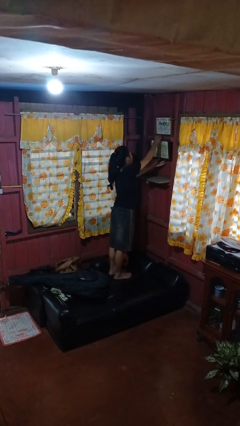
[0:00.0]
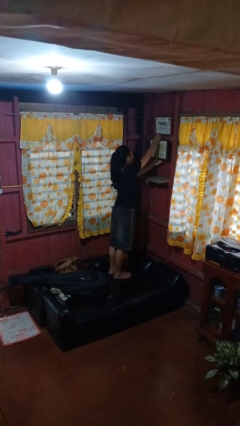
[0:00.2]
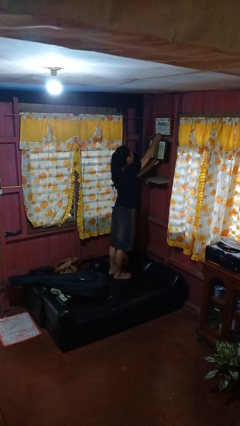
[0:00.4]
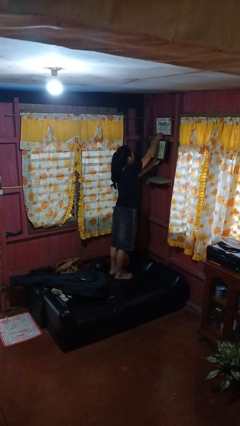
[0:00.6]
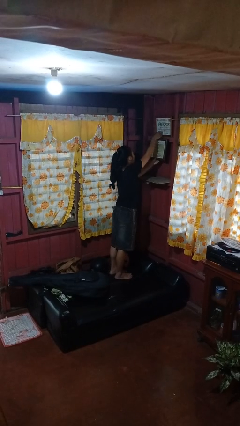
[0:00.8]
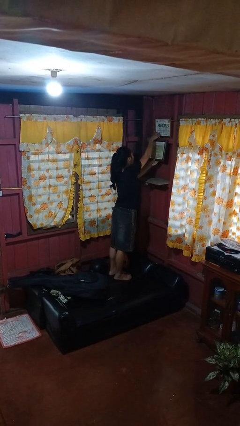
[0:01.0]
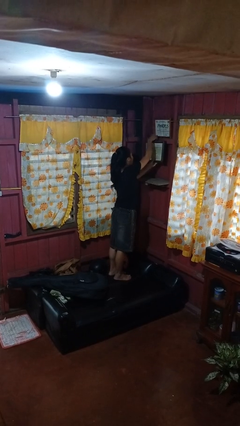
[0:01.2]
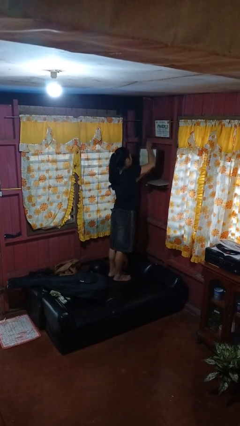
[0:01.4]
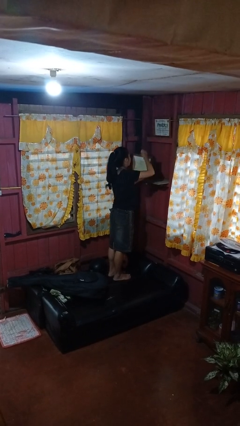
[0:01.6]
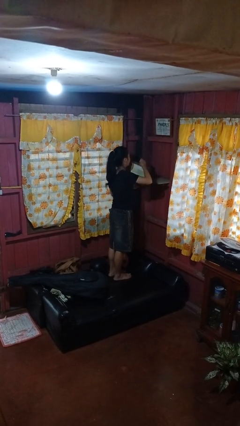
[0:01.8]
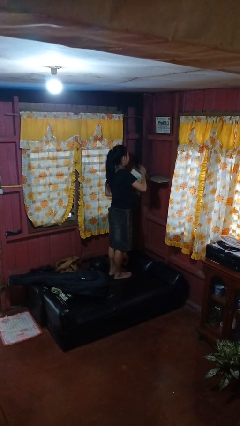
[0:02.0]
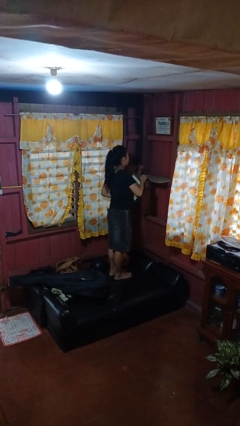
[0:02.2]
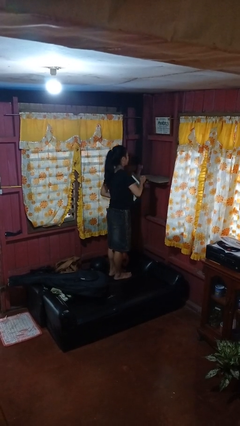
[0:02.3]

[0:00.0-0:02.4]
person takes down picture frame

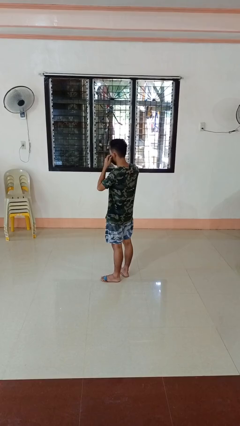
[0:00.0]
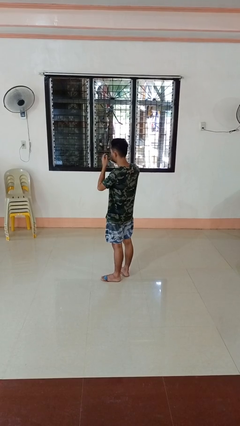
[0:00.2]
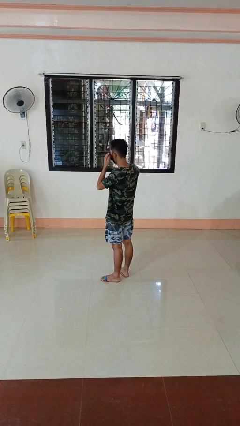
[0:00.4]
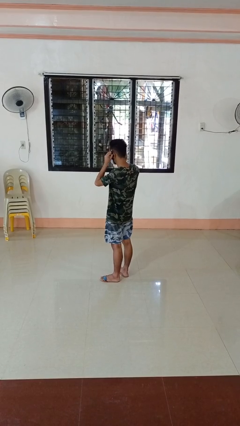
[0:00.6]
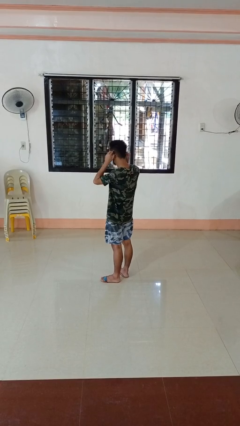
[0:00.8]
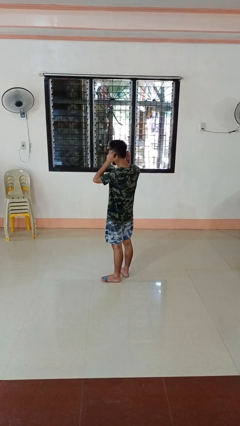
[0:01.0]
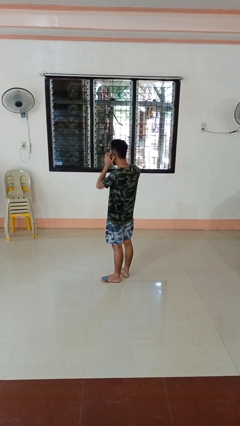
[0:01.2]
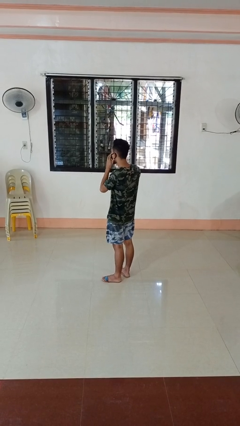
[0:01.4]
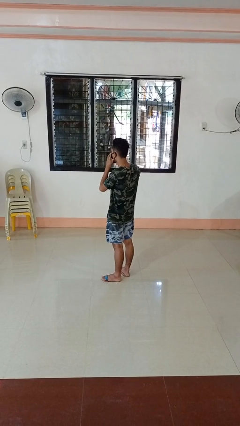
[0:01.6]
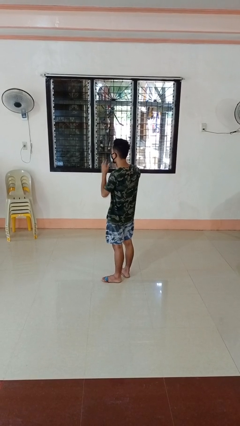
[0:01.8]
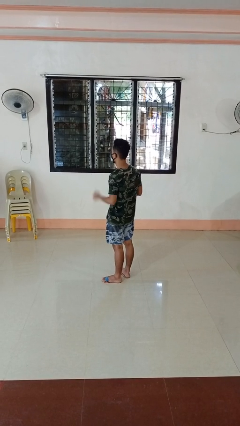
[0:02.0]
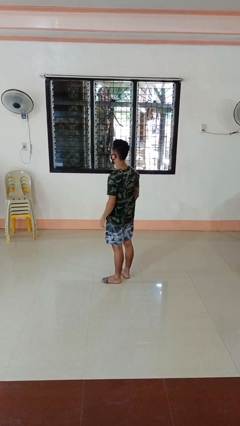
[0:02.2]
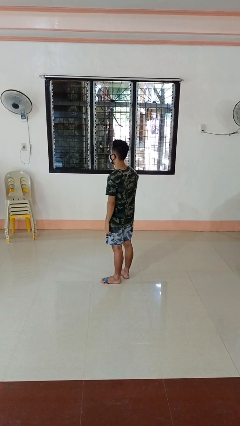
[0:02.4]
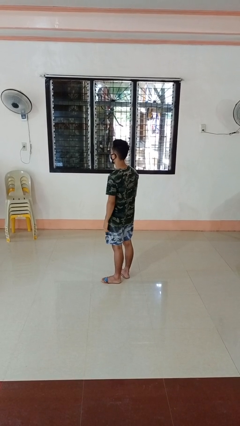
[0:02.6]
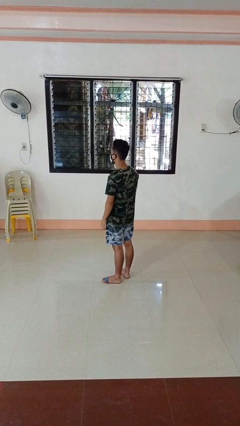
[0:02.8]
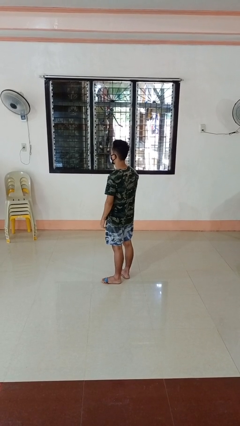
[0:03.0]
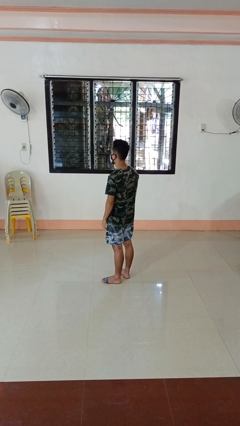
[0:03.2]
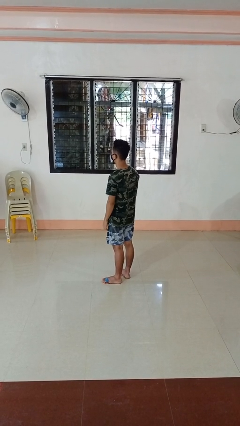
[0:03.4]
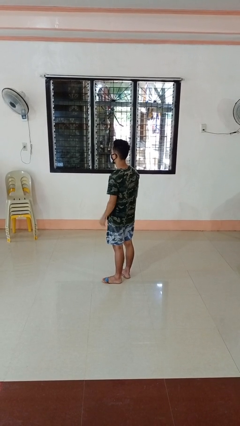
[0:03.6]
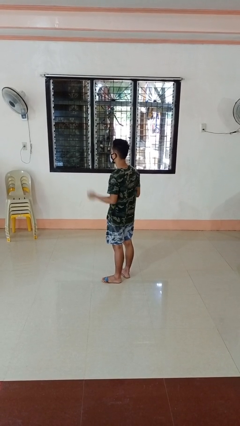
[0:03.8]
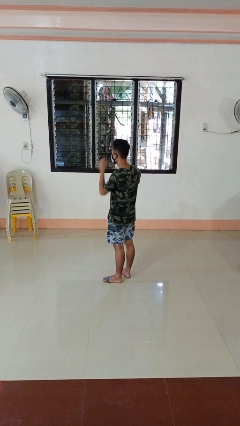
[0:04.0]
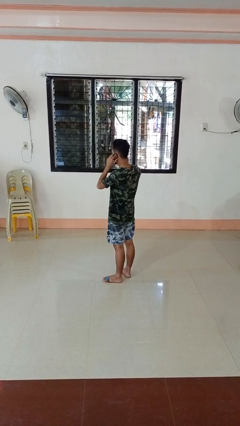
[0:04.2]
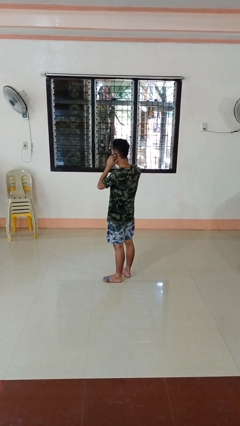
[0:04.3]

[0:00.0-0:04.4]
person puts on facemask

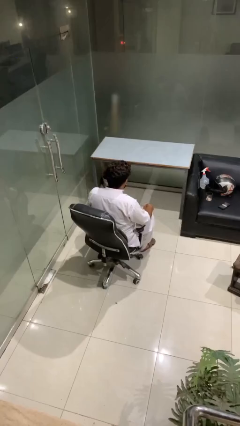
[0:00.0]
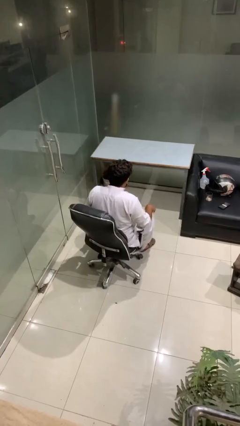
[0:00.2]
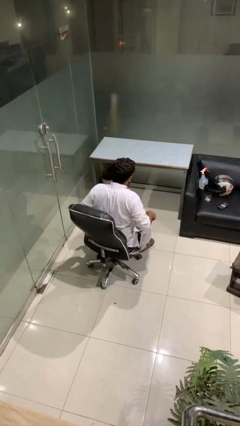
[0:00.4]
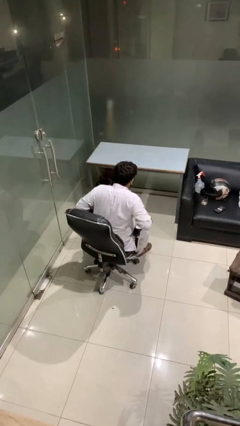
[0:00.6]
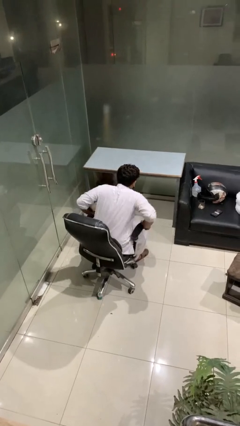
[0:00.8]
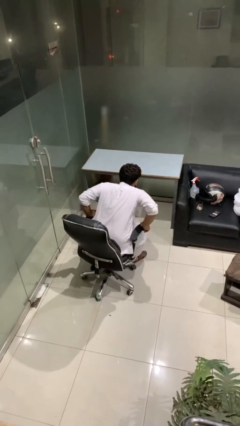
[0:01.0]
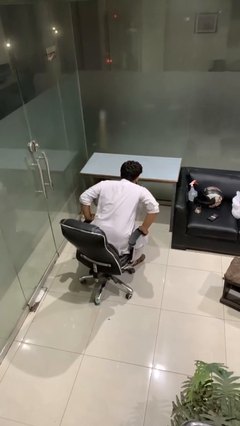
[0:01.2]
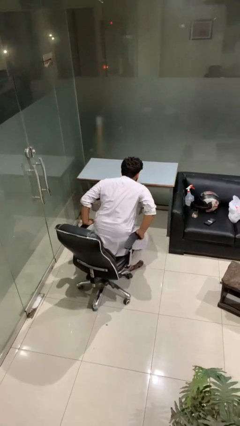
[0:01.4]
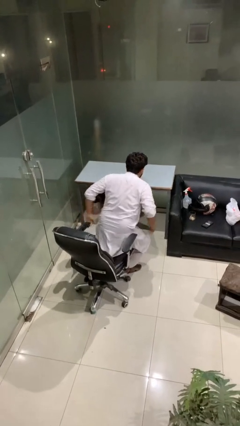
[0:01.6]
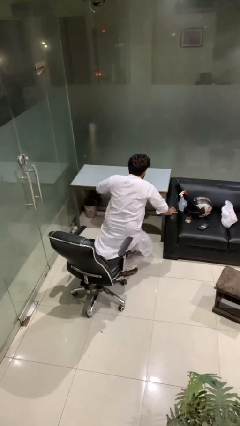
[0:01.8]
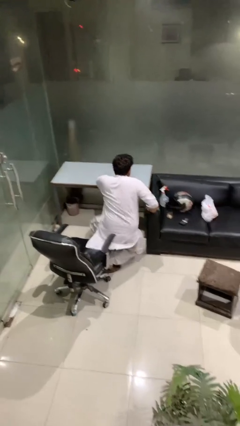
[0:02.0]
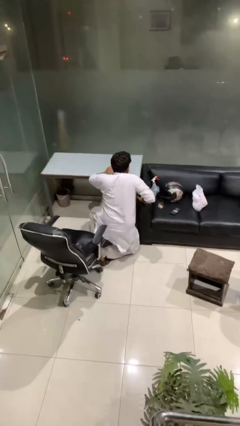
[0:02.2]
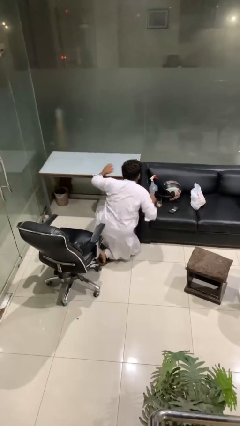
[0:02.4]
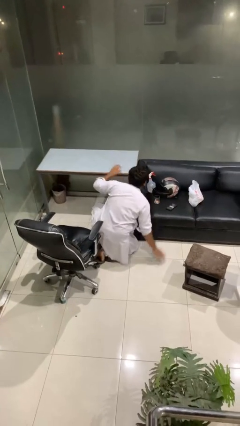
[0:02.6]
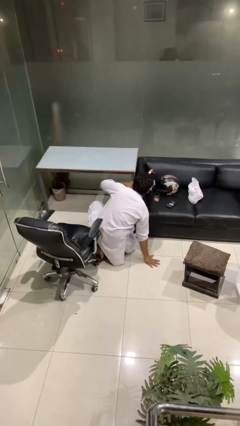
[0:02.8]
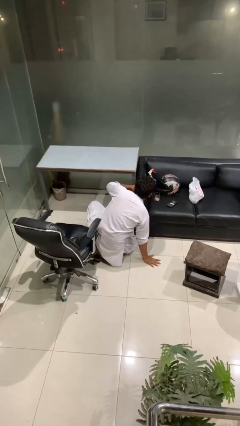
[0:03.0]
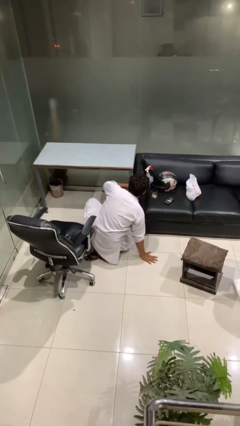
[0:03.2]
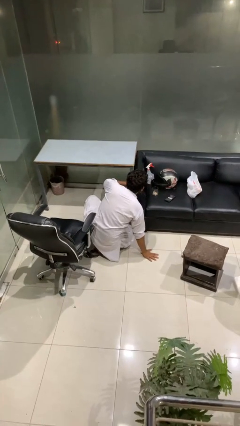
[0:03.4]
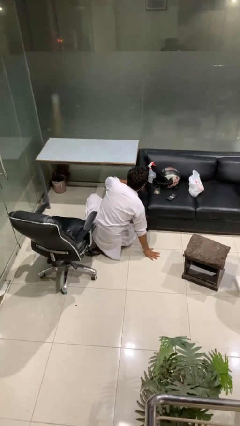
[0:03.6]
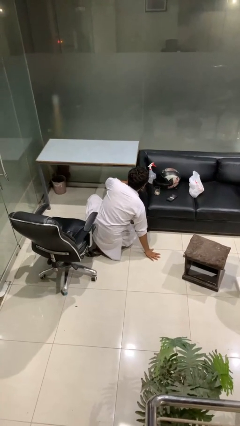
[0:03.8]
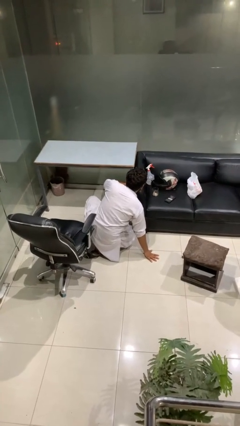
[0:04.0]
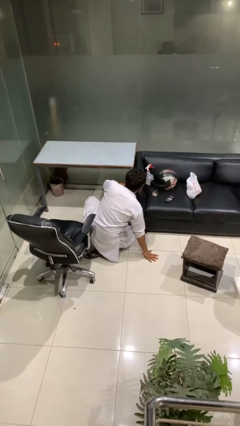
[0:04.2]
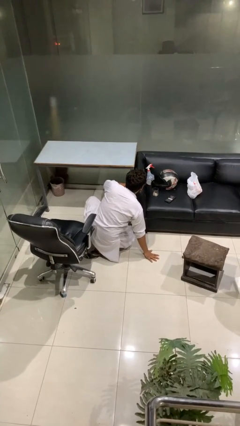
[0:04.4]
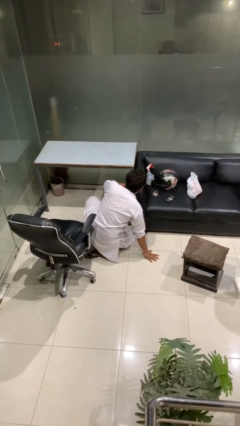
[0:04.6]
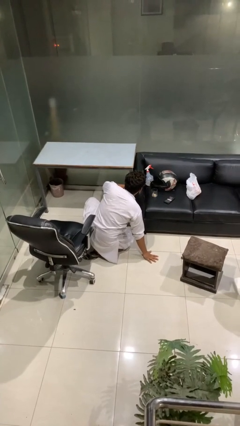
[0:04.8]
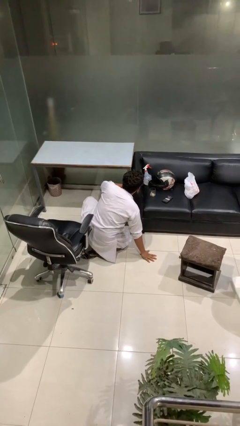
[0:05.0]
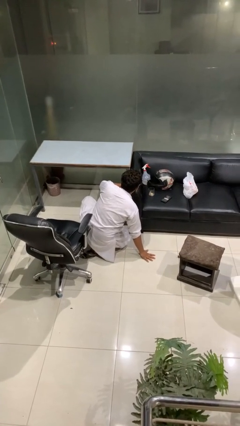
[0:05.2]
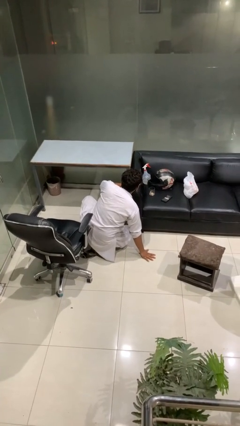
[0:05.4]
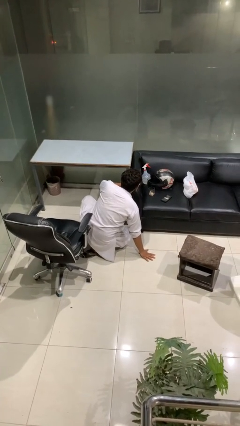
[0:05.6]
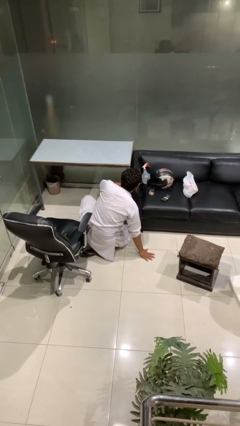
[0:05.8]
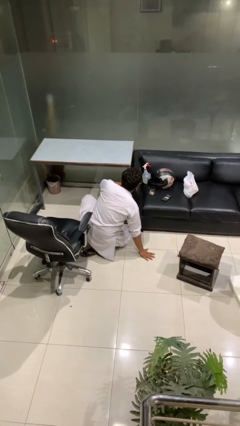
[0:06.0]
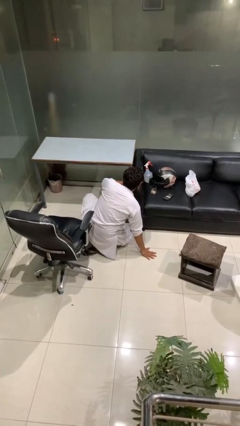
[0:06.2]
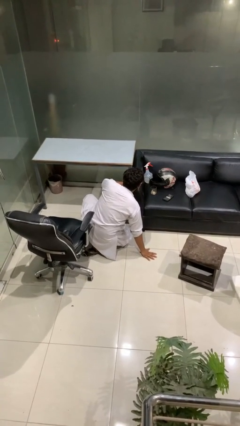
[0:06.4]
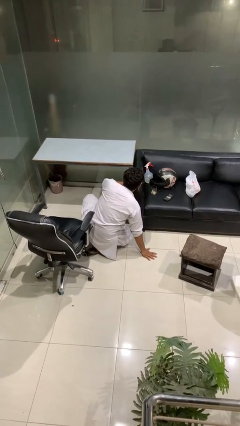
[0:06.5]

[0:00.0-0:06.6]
person falls from chair

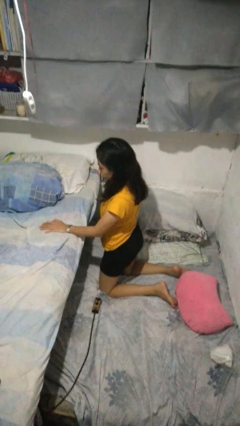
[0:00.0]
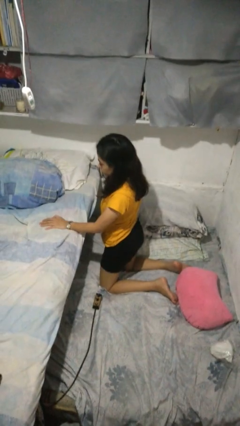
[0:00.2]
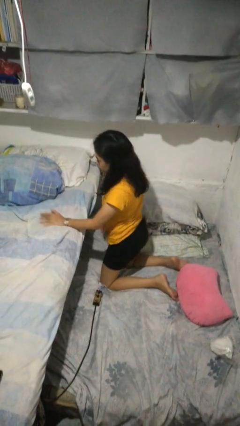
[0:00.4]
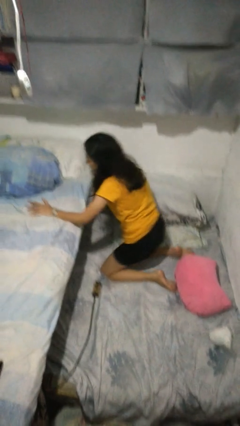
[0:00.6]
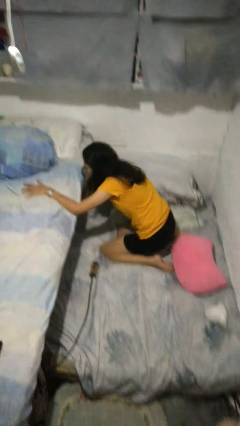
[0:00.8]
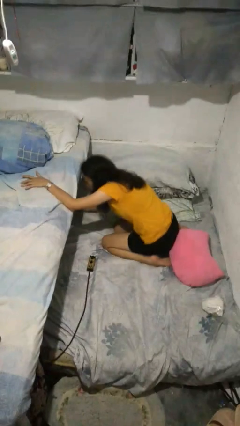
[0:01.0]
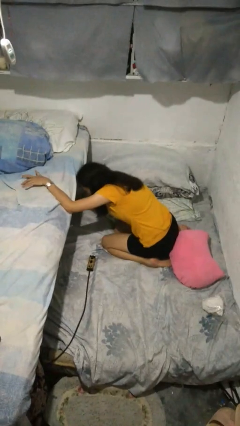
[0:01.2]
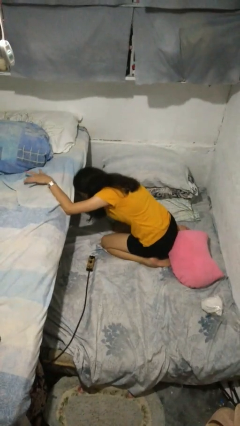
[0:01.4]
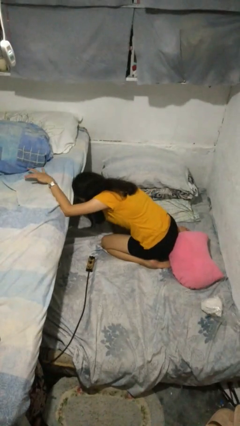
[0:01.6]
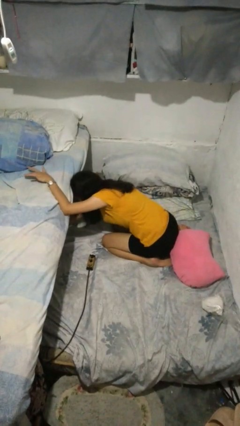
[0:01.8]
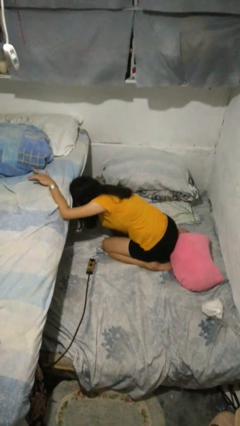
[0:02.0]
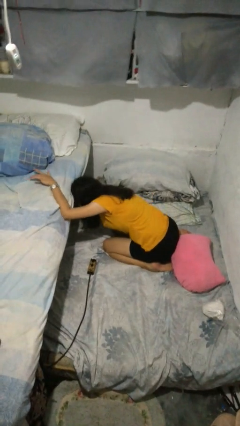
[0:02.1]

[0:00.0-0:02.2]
person searches under bed

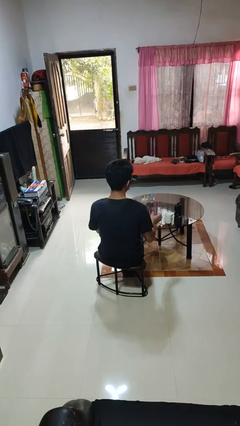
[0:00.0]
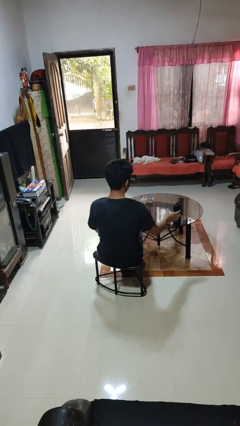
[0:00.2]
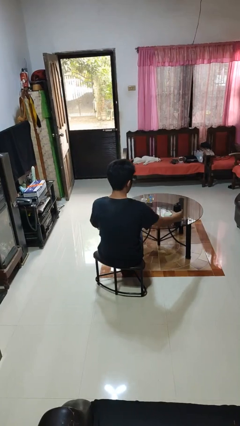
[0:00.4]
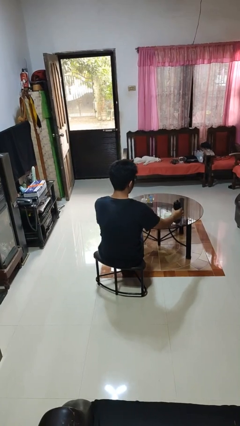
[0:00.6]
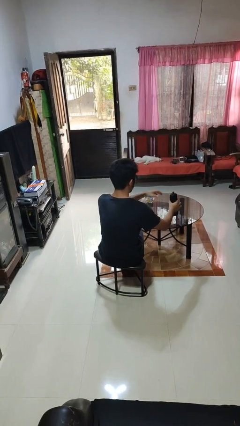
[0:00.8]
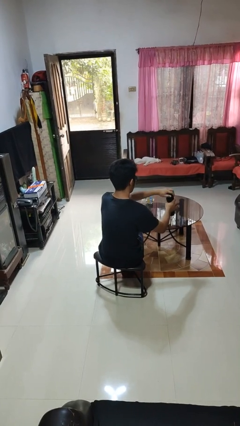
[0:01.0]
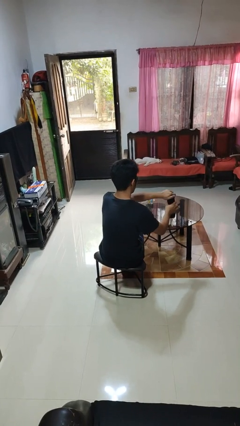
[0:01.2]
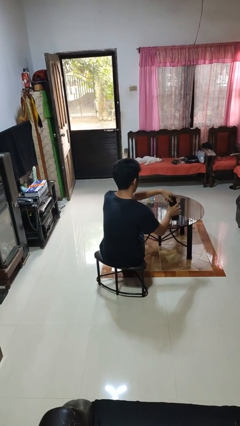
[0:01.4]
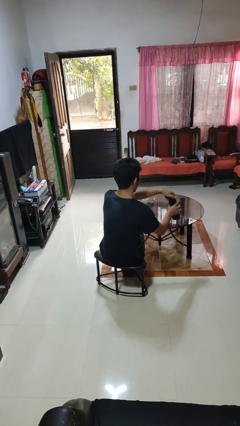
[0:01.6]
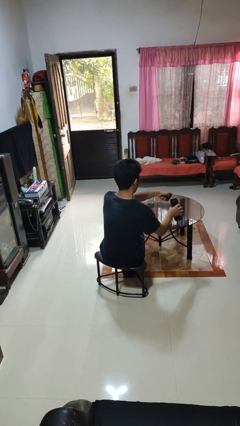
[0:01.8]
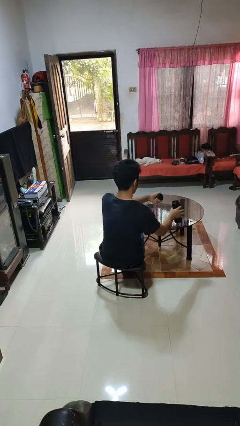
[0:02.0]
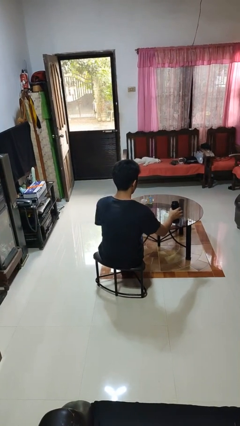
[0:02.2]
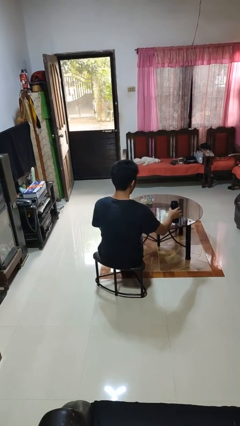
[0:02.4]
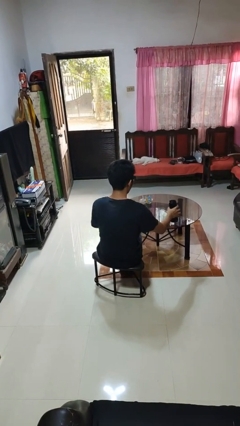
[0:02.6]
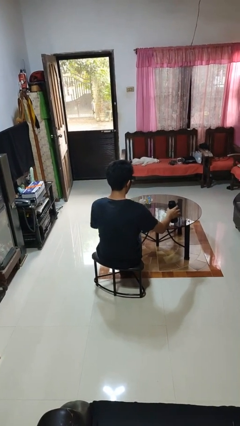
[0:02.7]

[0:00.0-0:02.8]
person unscrews lid from bottle
